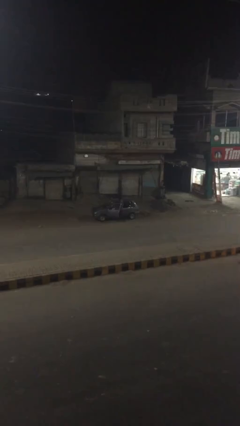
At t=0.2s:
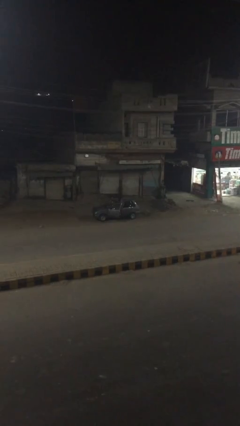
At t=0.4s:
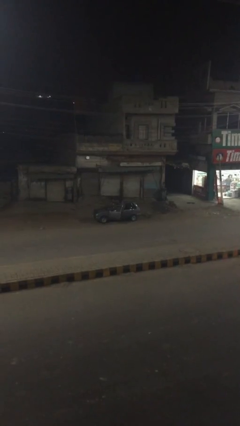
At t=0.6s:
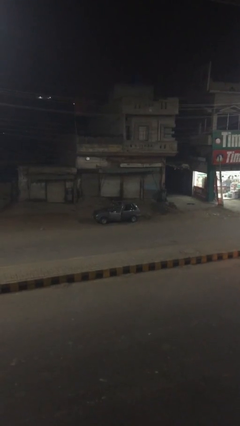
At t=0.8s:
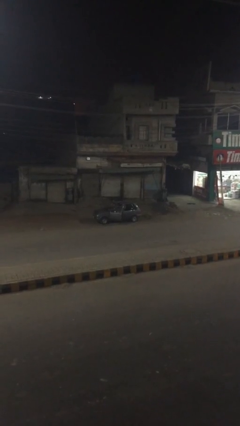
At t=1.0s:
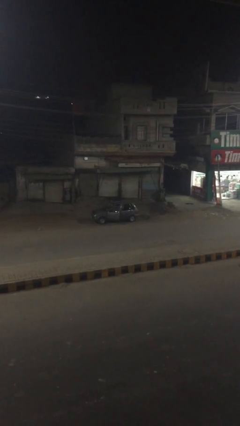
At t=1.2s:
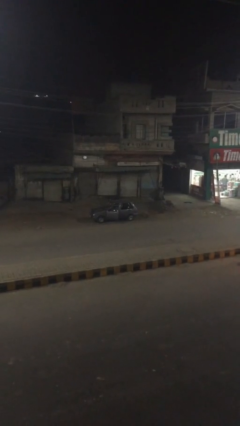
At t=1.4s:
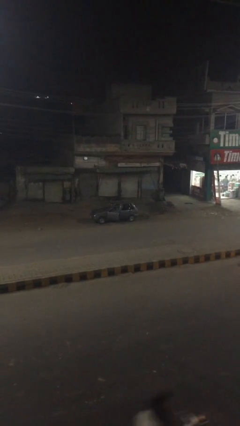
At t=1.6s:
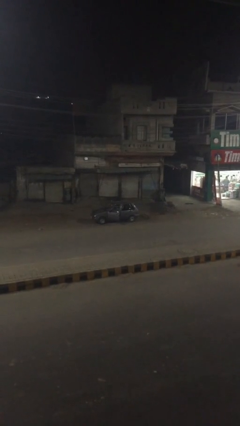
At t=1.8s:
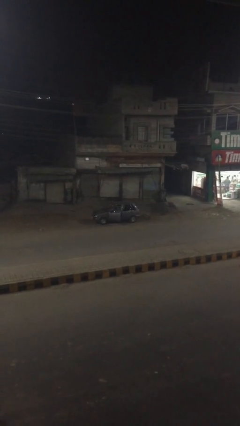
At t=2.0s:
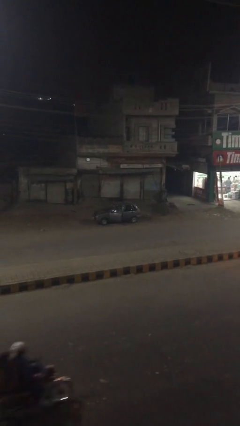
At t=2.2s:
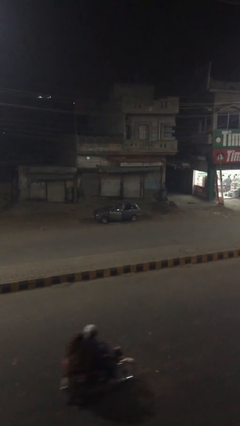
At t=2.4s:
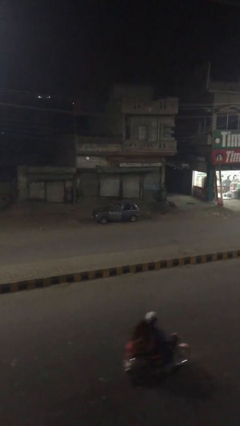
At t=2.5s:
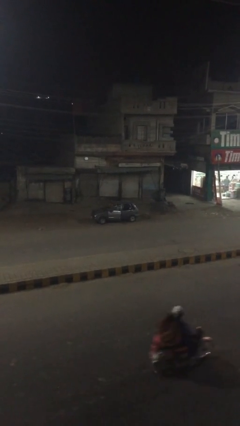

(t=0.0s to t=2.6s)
person enters car

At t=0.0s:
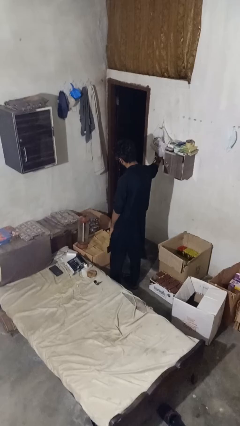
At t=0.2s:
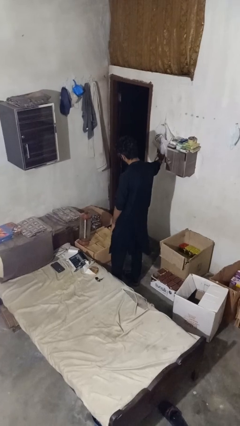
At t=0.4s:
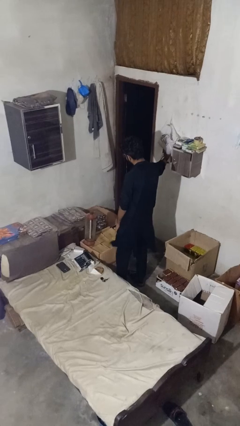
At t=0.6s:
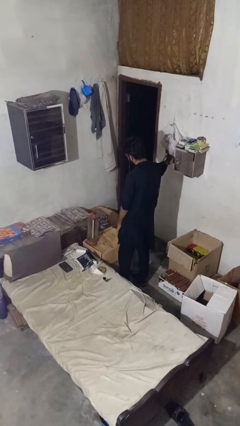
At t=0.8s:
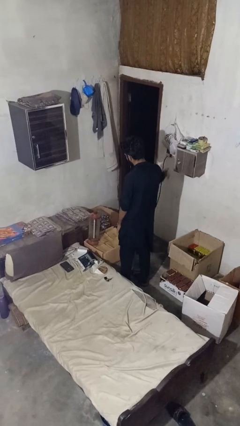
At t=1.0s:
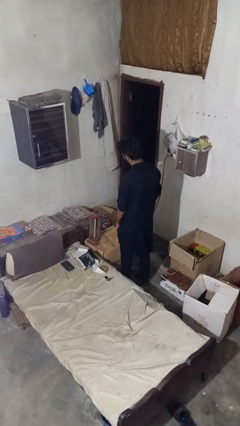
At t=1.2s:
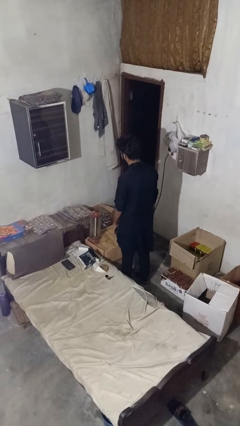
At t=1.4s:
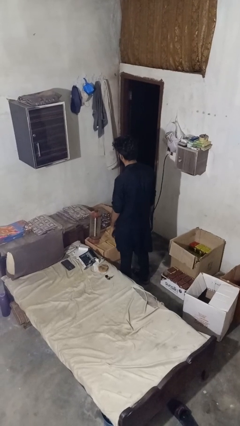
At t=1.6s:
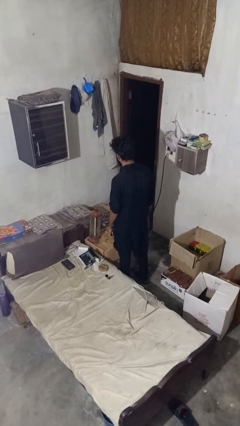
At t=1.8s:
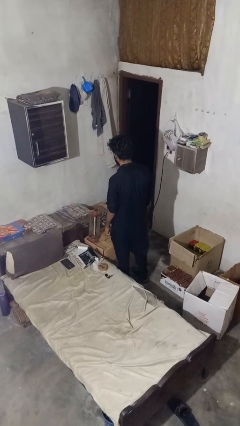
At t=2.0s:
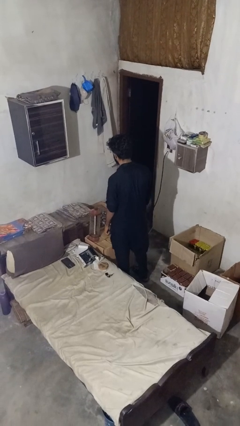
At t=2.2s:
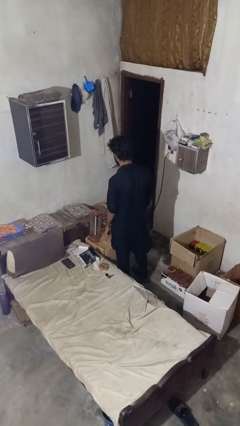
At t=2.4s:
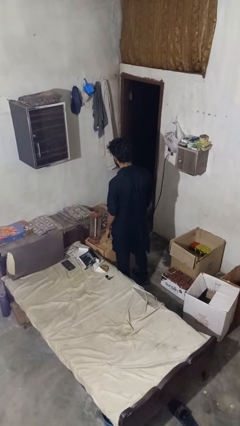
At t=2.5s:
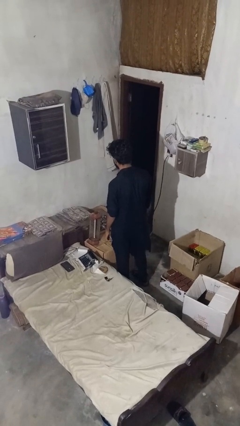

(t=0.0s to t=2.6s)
person turns off lamp

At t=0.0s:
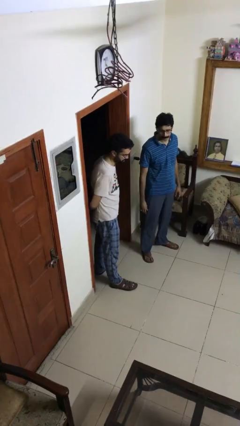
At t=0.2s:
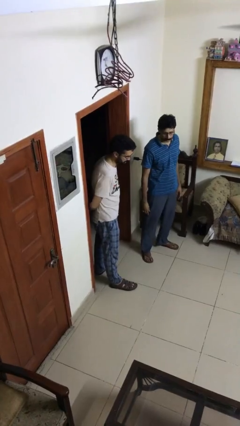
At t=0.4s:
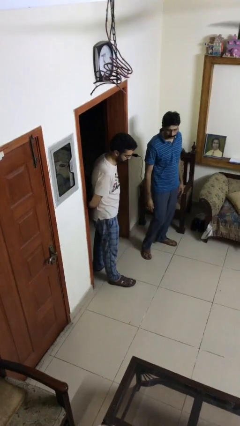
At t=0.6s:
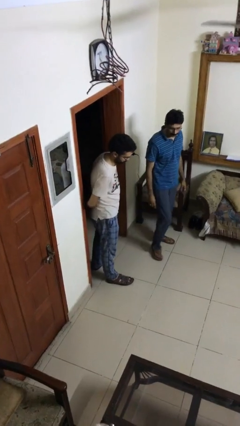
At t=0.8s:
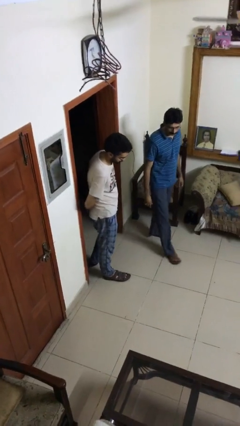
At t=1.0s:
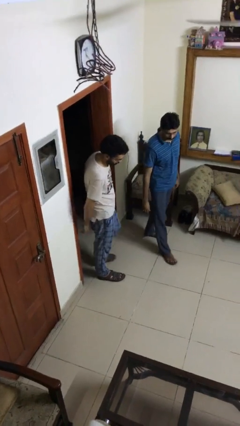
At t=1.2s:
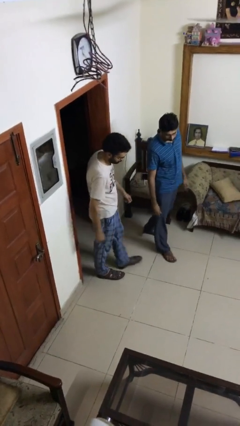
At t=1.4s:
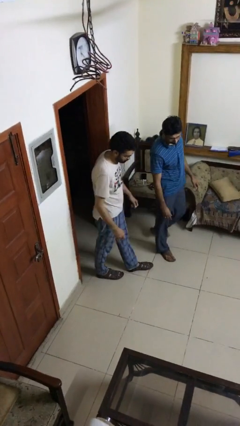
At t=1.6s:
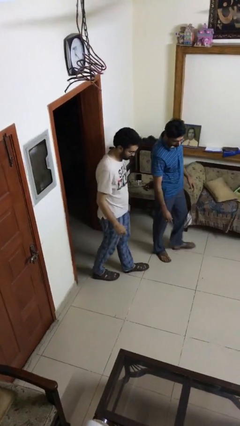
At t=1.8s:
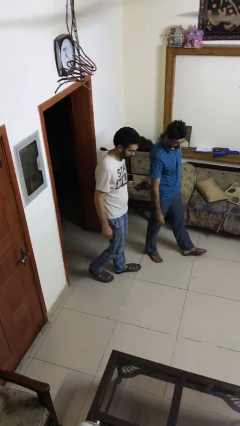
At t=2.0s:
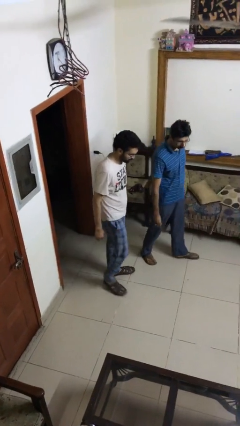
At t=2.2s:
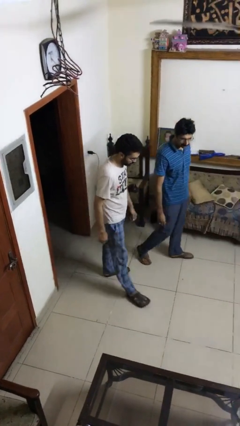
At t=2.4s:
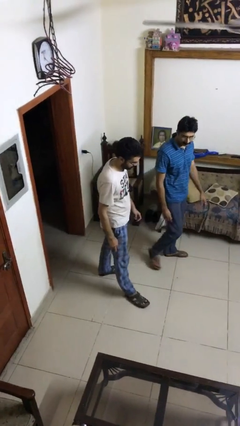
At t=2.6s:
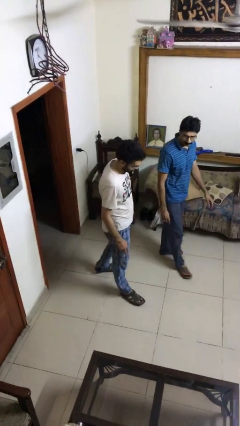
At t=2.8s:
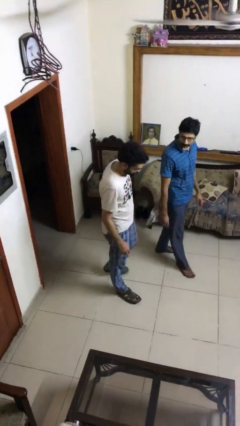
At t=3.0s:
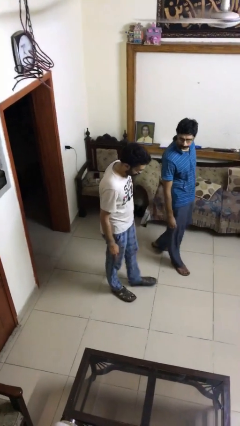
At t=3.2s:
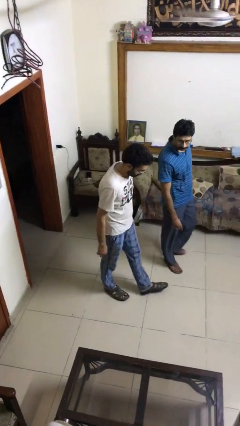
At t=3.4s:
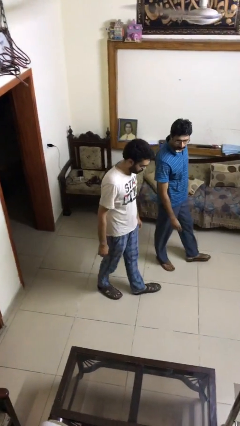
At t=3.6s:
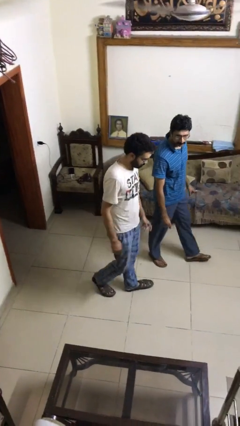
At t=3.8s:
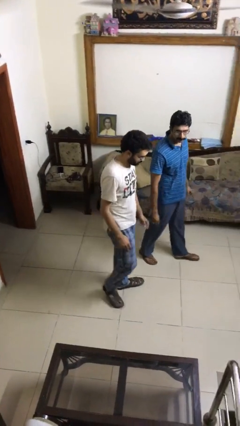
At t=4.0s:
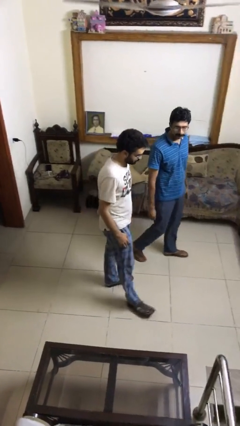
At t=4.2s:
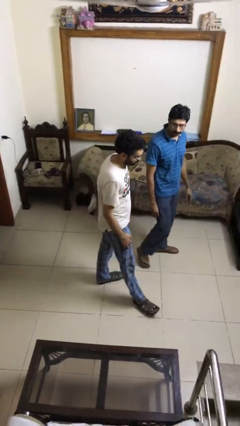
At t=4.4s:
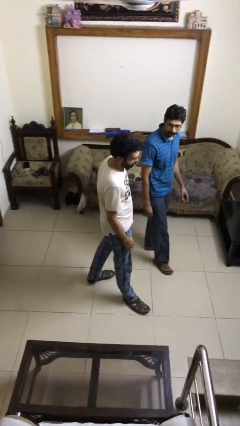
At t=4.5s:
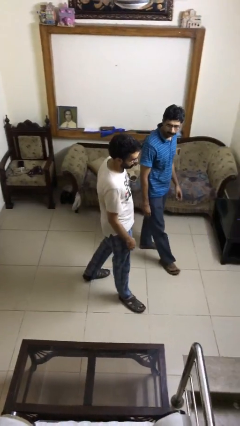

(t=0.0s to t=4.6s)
person talks to person

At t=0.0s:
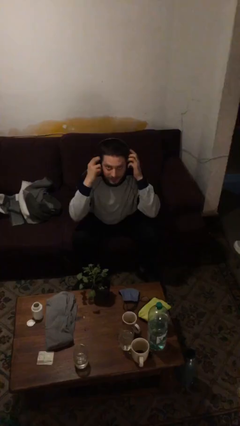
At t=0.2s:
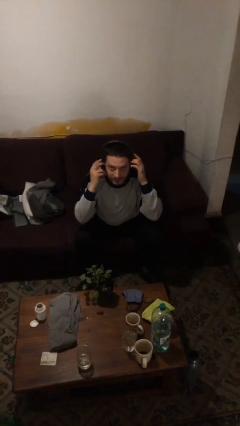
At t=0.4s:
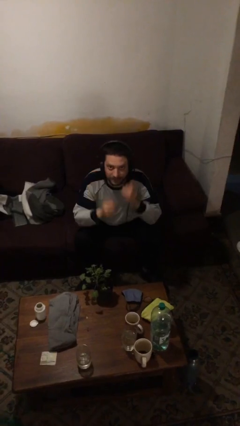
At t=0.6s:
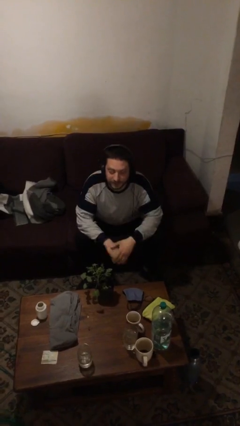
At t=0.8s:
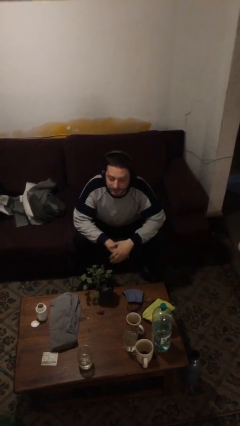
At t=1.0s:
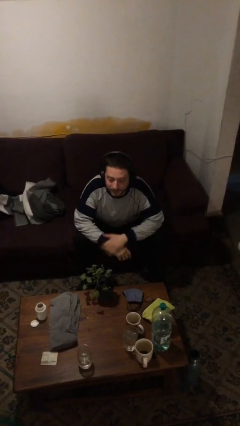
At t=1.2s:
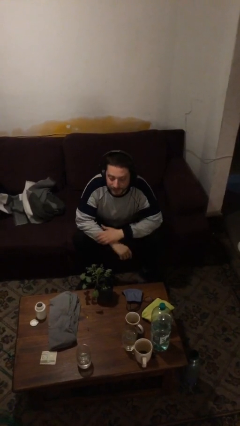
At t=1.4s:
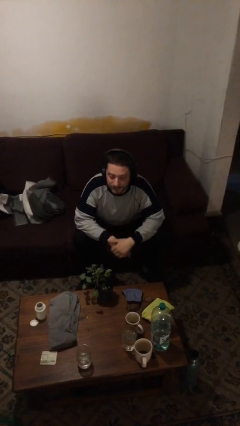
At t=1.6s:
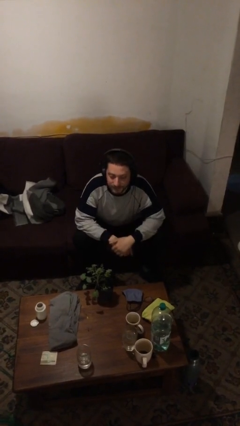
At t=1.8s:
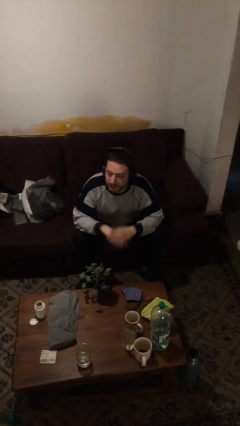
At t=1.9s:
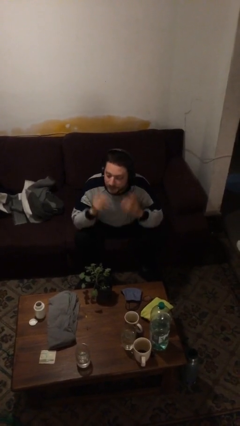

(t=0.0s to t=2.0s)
person puts on headphones

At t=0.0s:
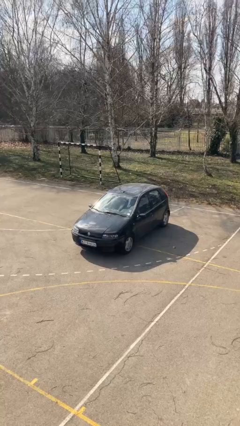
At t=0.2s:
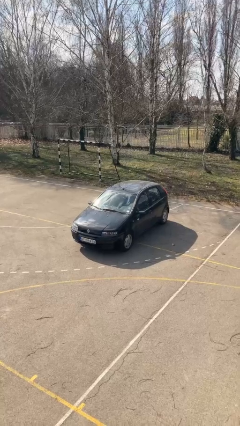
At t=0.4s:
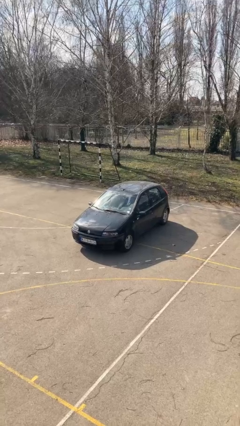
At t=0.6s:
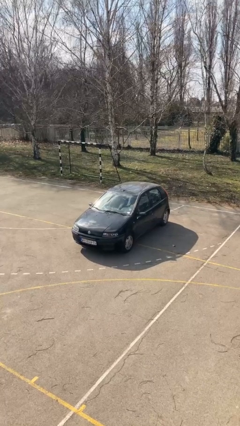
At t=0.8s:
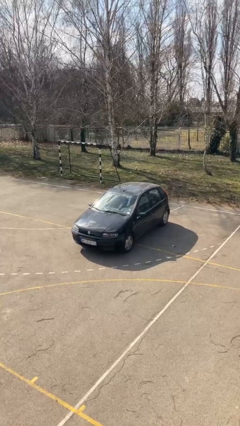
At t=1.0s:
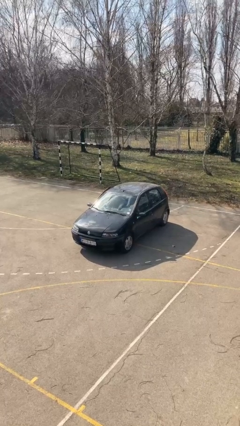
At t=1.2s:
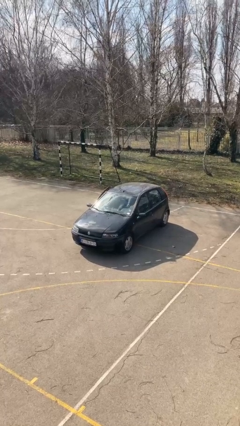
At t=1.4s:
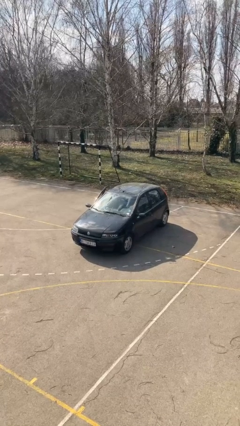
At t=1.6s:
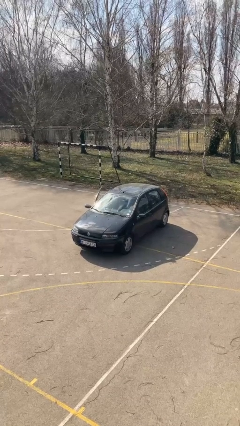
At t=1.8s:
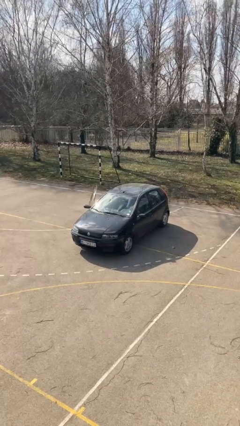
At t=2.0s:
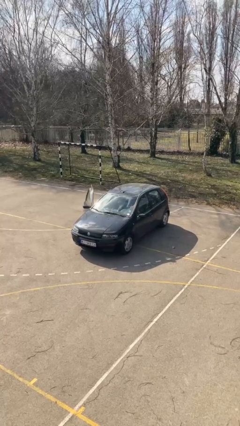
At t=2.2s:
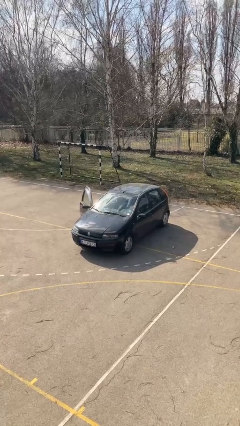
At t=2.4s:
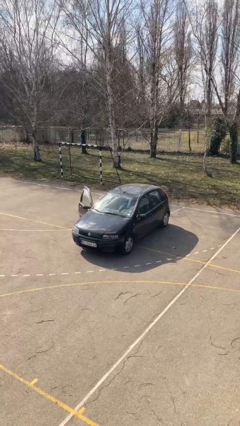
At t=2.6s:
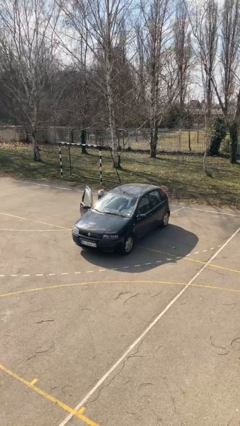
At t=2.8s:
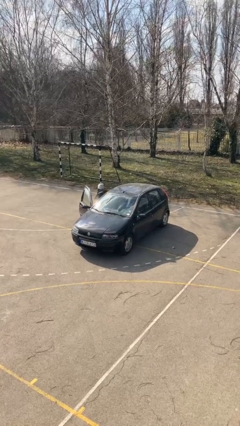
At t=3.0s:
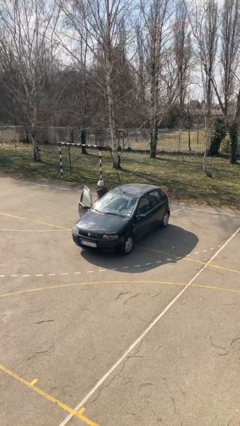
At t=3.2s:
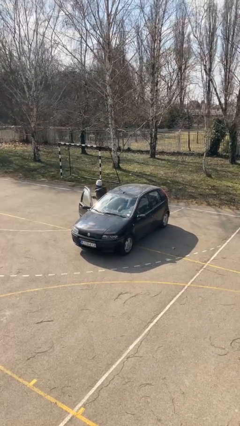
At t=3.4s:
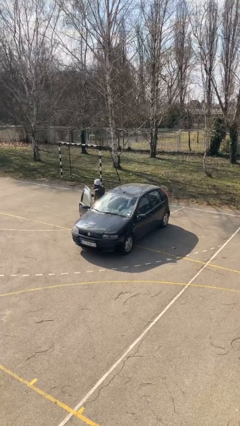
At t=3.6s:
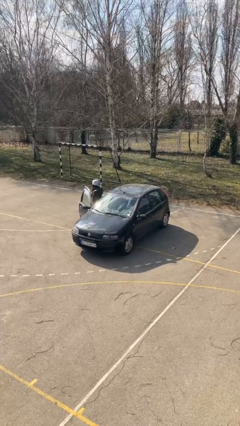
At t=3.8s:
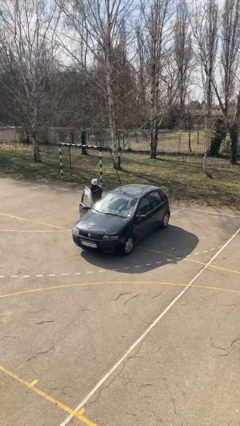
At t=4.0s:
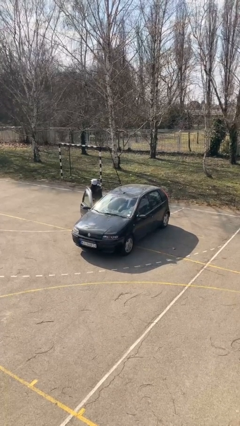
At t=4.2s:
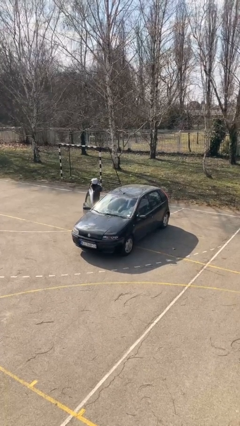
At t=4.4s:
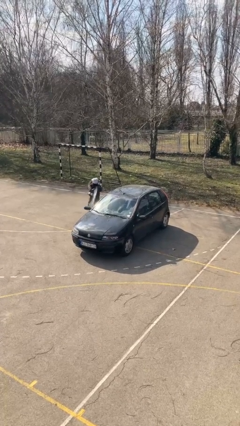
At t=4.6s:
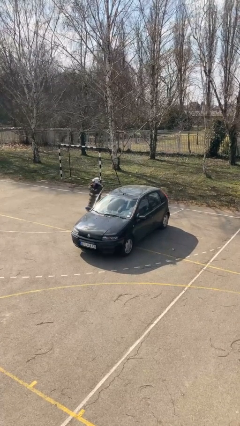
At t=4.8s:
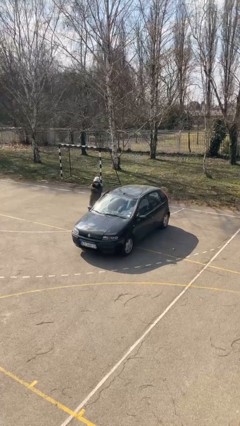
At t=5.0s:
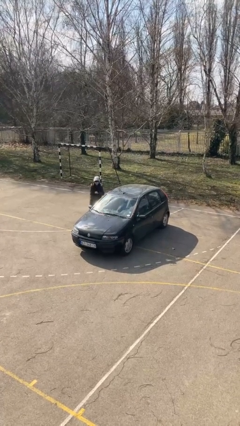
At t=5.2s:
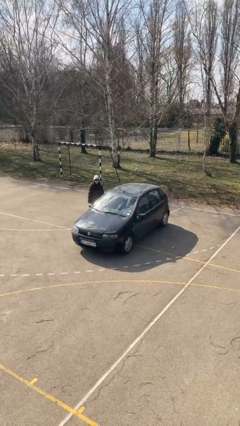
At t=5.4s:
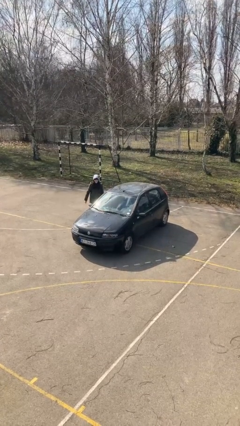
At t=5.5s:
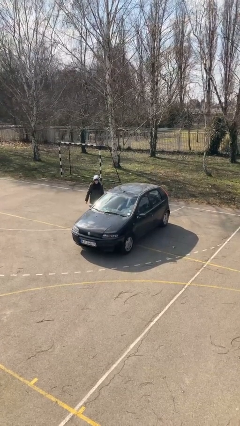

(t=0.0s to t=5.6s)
car drops off person
